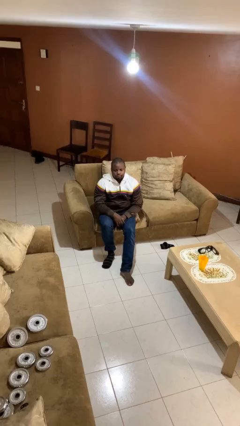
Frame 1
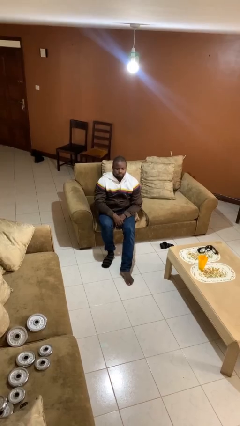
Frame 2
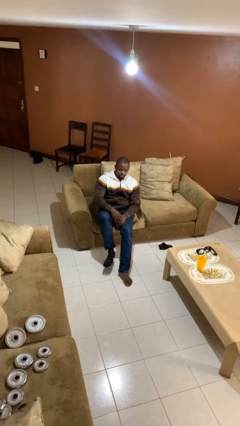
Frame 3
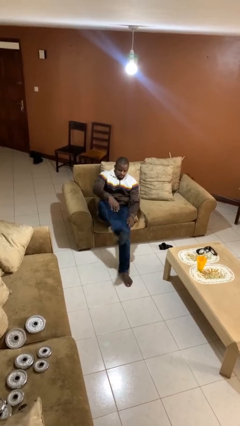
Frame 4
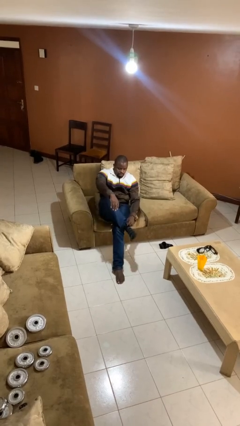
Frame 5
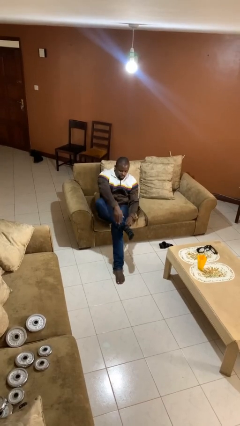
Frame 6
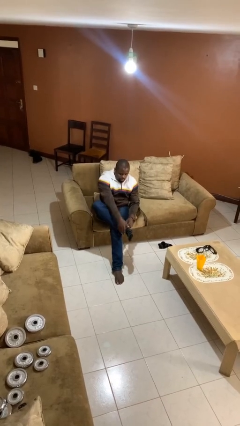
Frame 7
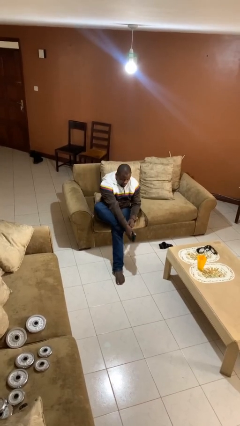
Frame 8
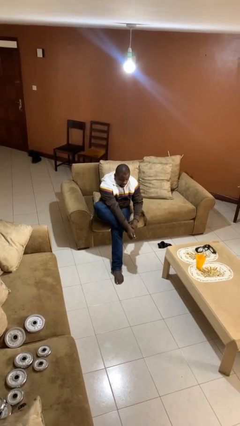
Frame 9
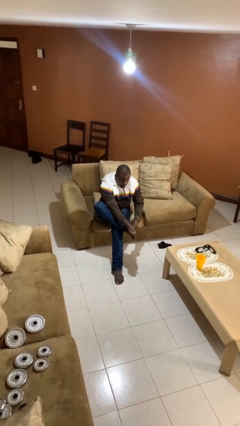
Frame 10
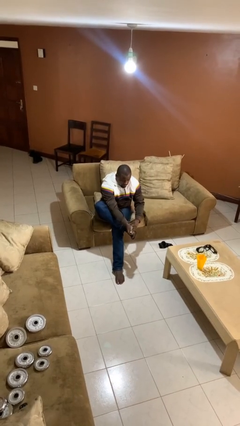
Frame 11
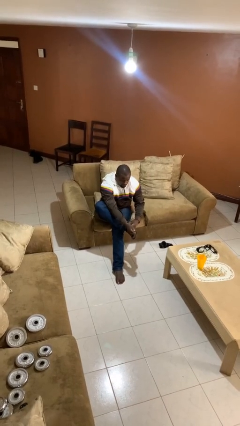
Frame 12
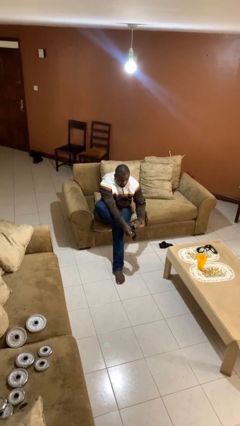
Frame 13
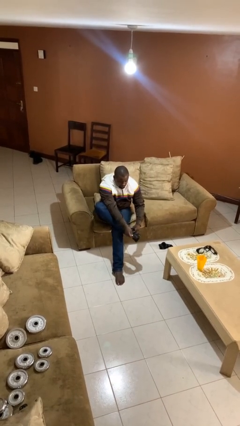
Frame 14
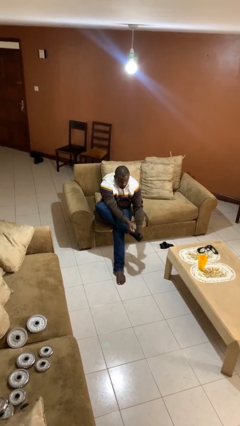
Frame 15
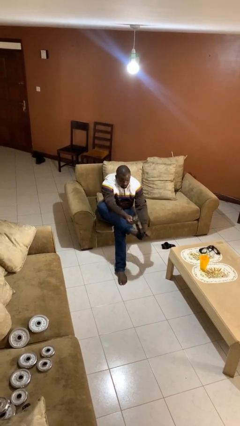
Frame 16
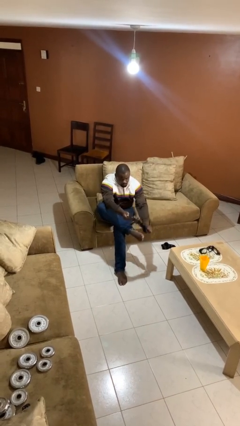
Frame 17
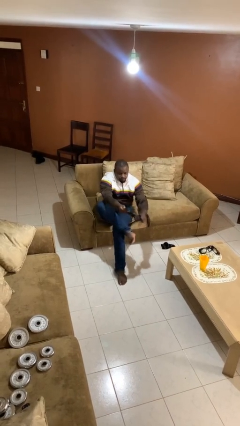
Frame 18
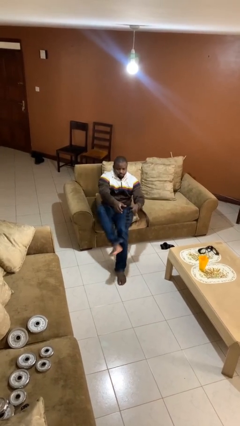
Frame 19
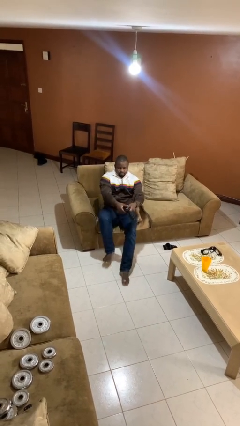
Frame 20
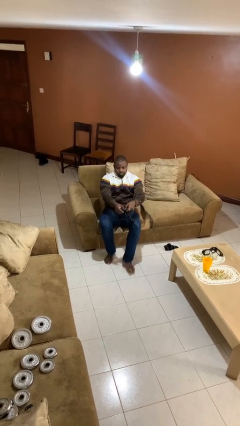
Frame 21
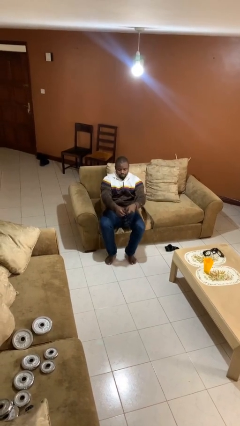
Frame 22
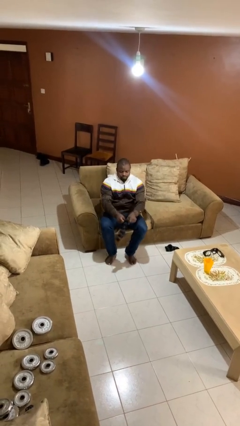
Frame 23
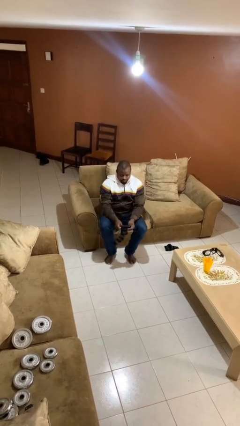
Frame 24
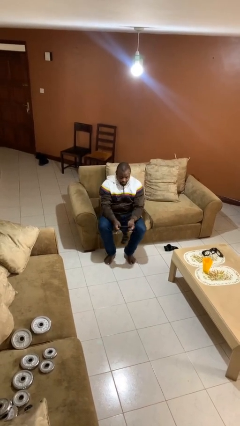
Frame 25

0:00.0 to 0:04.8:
person takes off socks

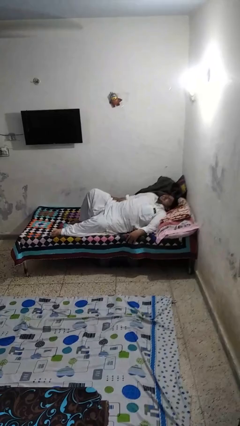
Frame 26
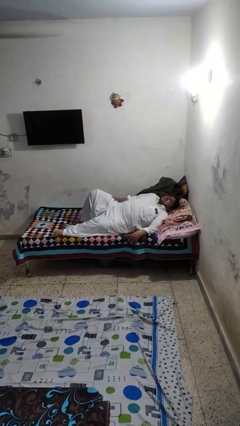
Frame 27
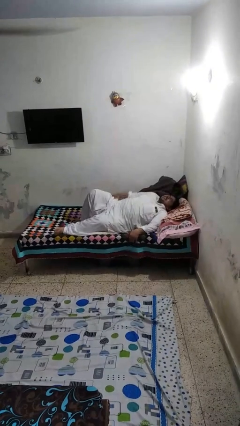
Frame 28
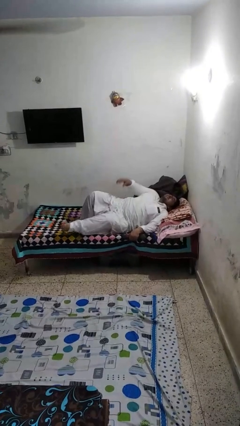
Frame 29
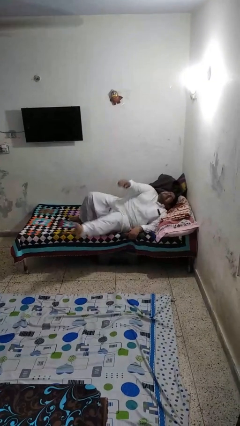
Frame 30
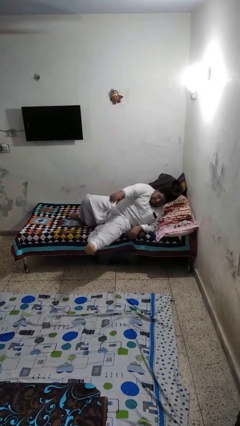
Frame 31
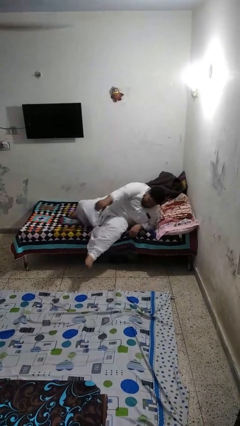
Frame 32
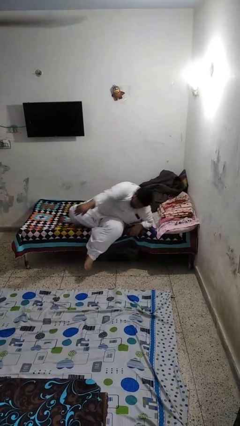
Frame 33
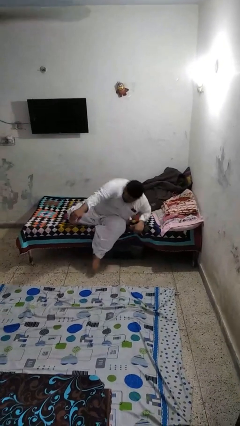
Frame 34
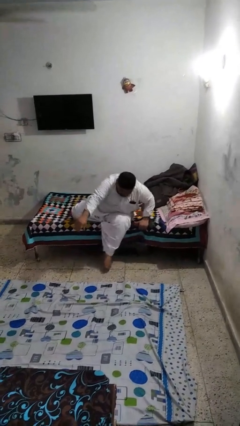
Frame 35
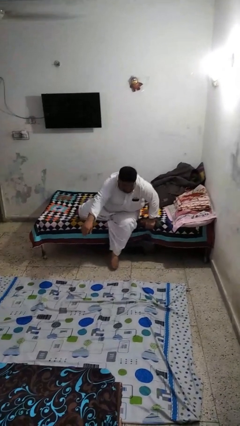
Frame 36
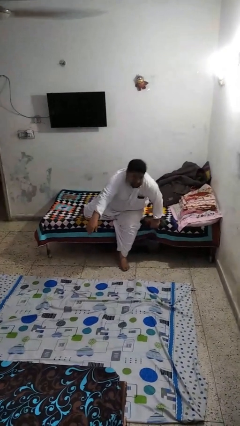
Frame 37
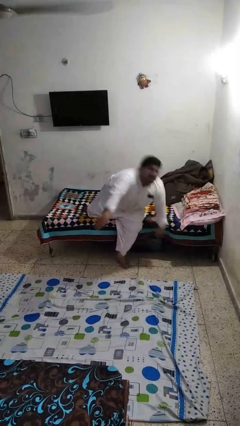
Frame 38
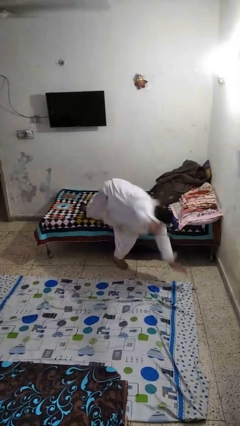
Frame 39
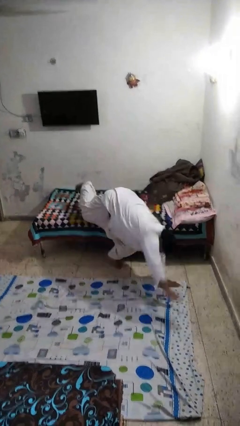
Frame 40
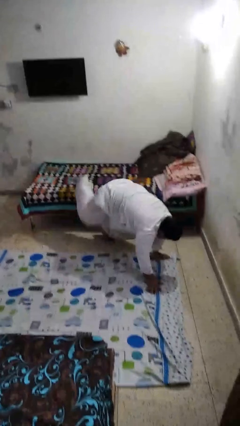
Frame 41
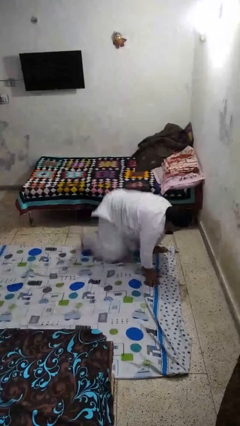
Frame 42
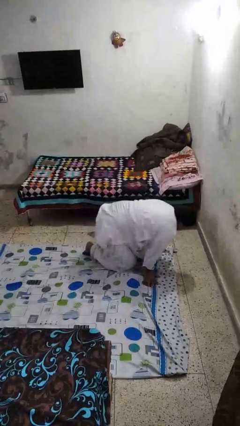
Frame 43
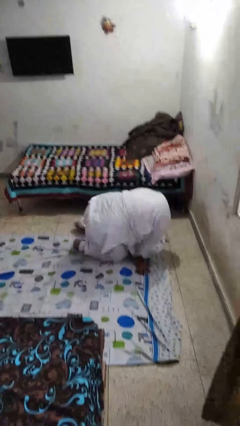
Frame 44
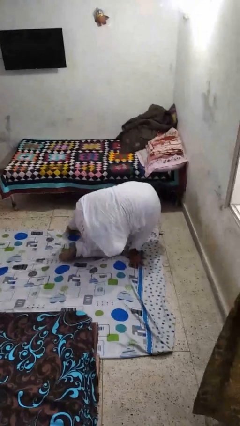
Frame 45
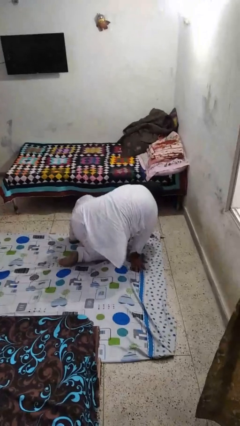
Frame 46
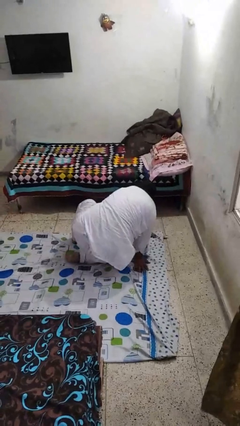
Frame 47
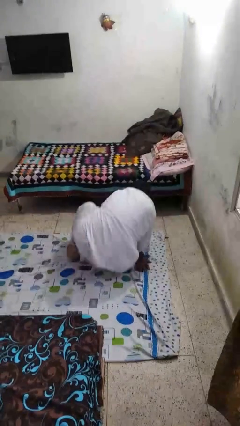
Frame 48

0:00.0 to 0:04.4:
person falls from bed

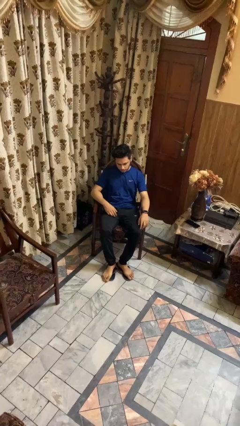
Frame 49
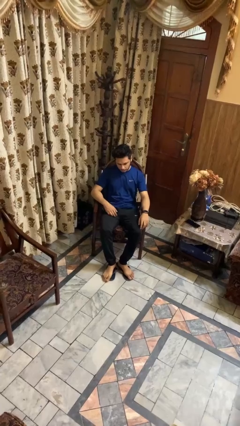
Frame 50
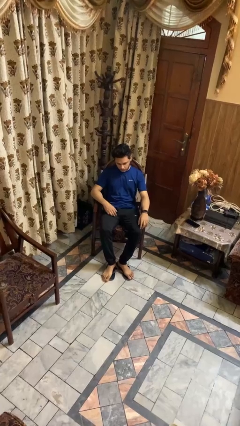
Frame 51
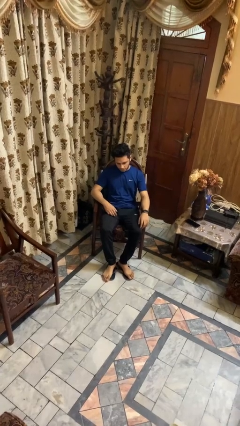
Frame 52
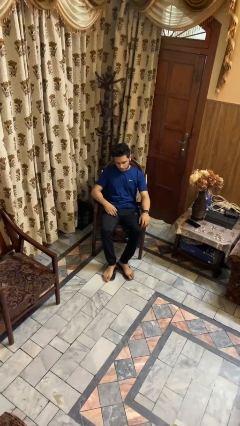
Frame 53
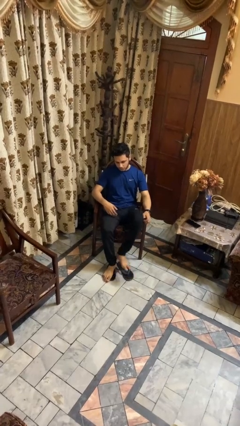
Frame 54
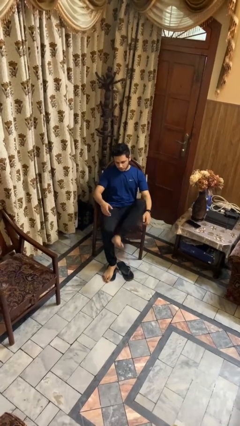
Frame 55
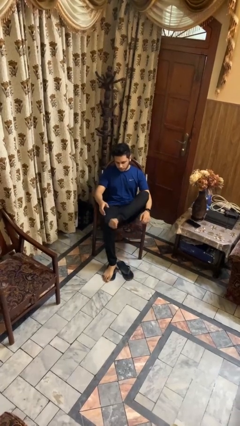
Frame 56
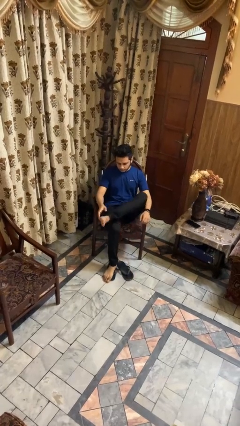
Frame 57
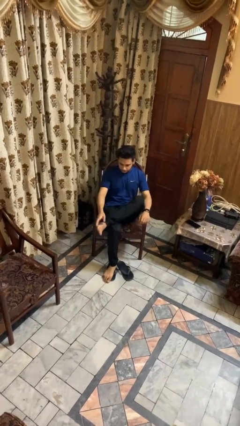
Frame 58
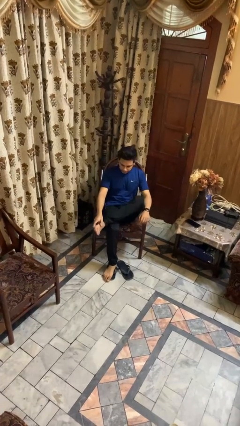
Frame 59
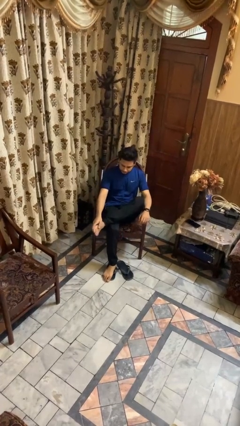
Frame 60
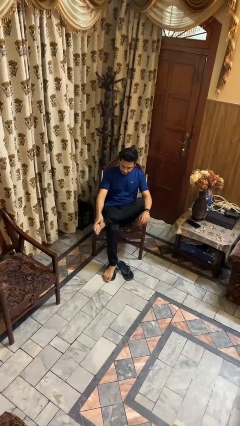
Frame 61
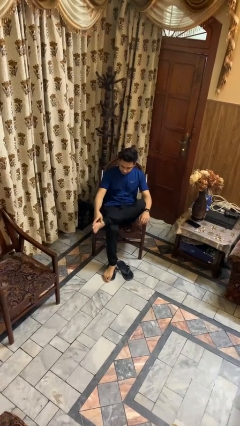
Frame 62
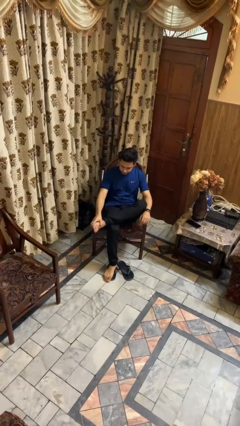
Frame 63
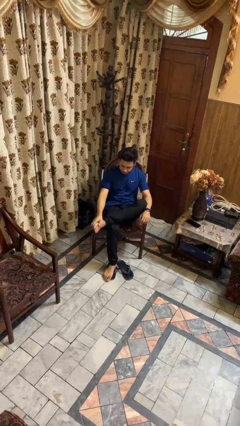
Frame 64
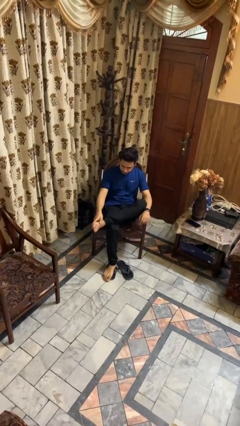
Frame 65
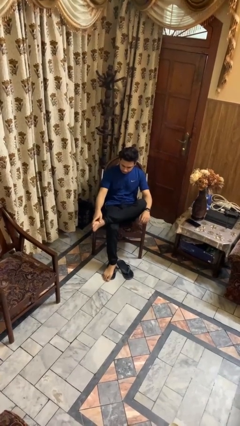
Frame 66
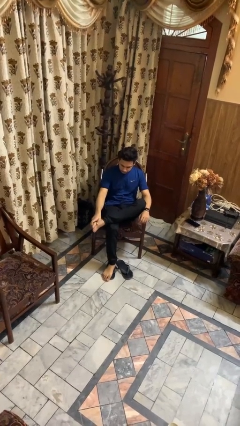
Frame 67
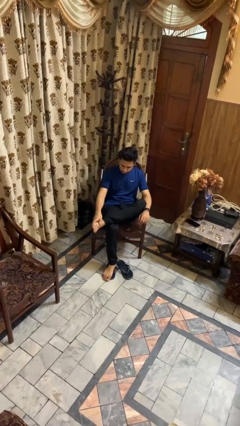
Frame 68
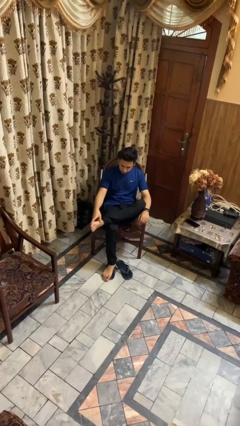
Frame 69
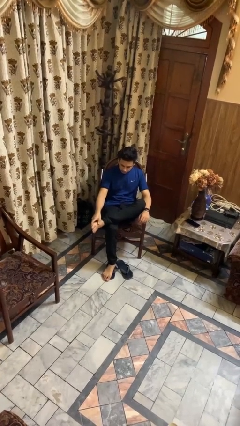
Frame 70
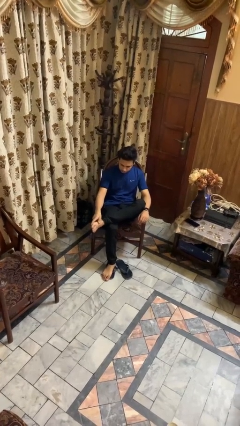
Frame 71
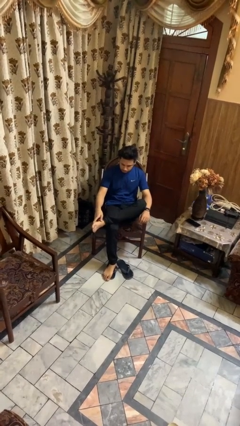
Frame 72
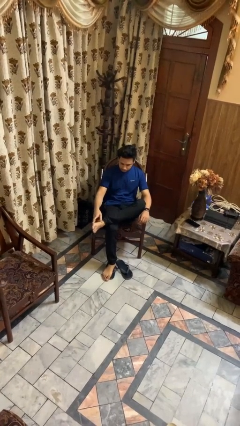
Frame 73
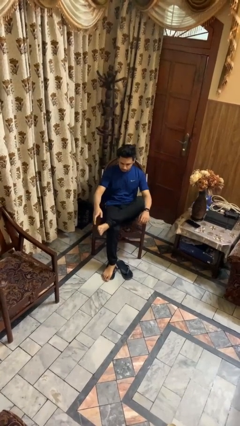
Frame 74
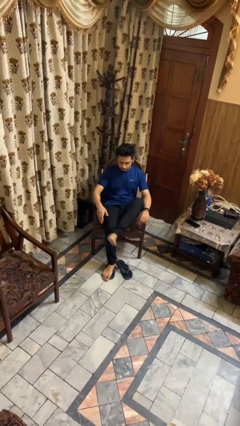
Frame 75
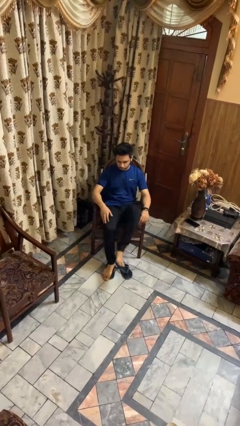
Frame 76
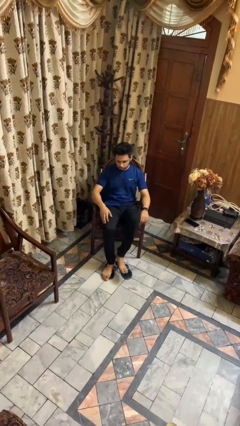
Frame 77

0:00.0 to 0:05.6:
person rubs foot

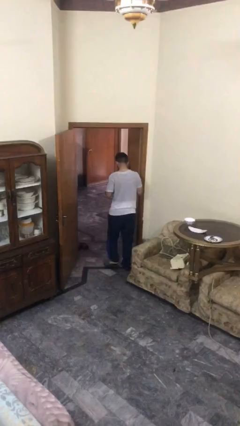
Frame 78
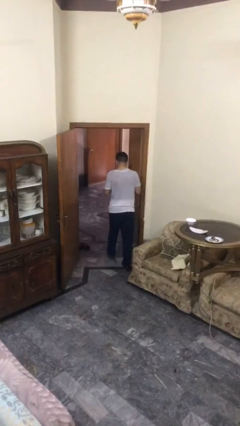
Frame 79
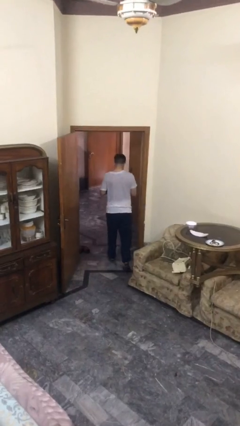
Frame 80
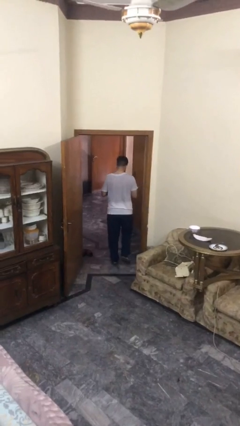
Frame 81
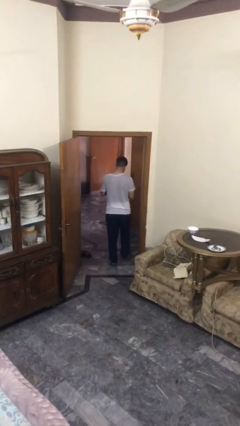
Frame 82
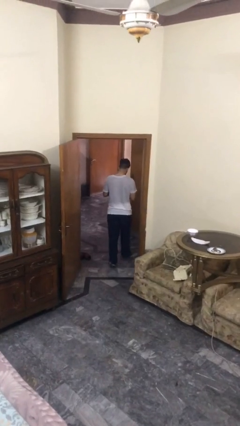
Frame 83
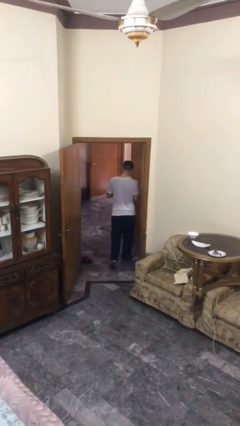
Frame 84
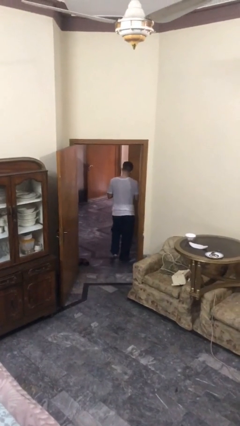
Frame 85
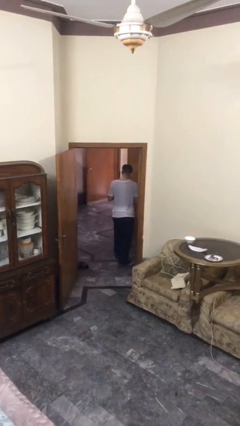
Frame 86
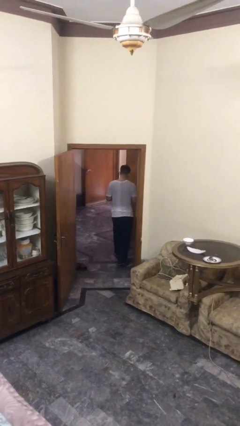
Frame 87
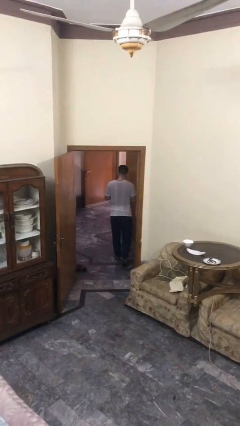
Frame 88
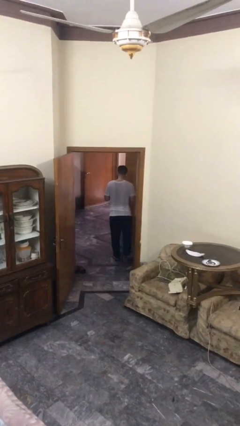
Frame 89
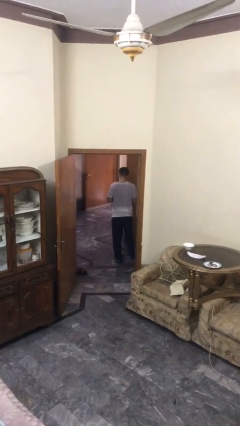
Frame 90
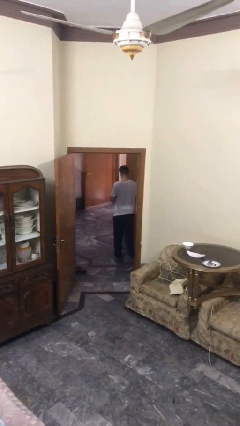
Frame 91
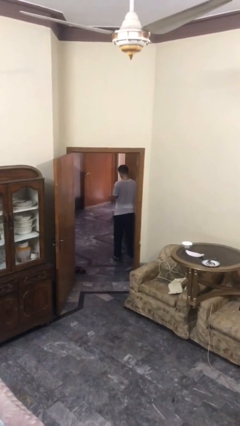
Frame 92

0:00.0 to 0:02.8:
person exits scene through structure

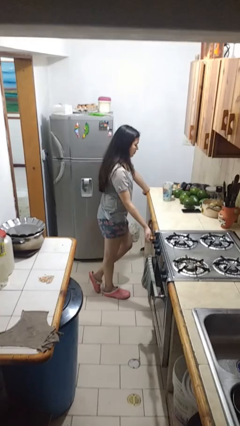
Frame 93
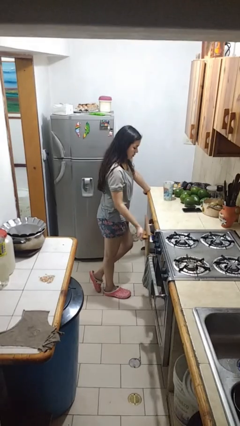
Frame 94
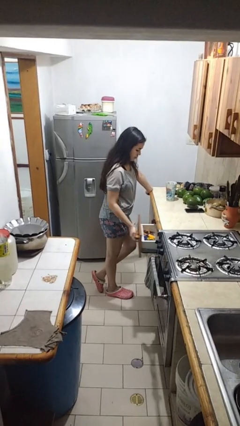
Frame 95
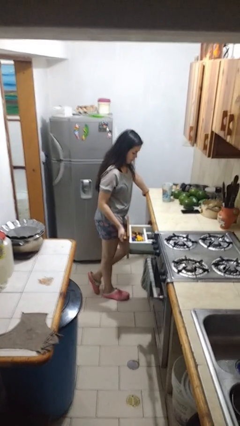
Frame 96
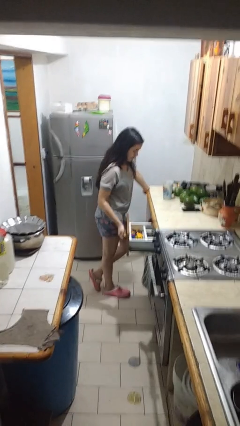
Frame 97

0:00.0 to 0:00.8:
person opens kitchen drawer
